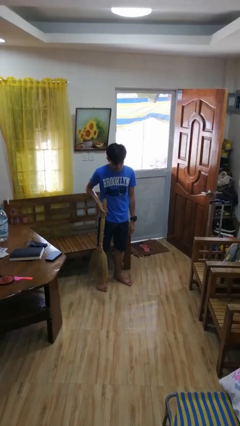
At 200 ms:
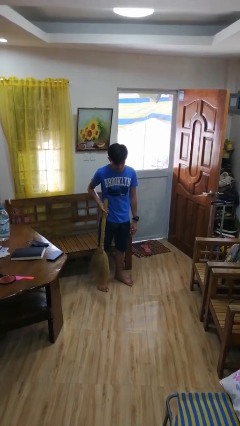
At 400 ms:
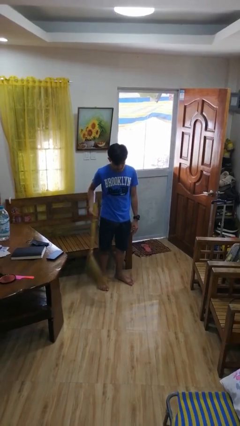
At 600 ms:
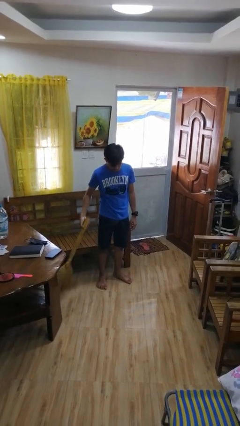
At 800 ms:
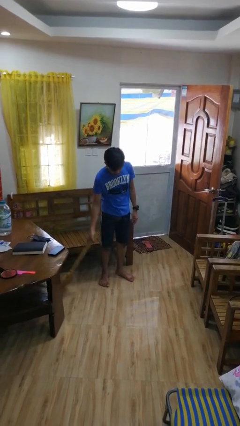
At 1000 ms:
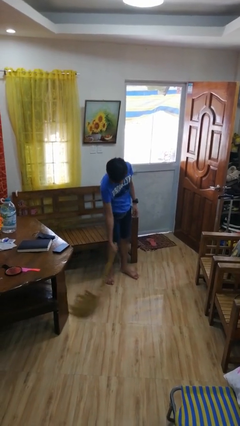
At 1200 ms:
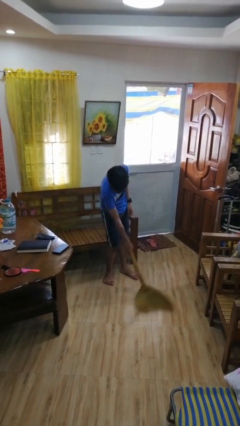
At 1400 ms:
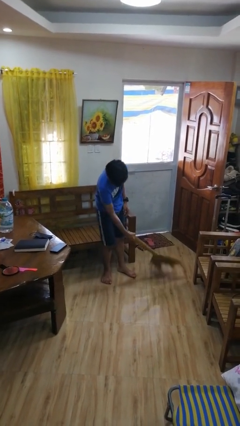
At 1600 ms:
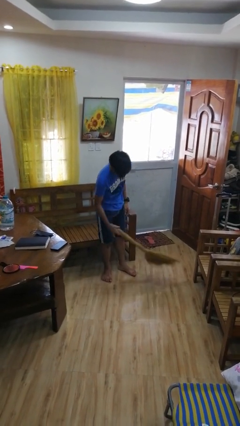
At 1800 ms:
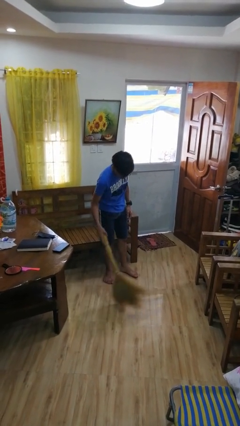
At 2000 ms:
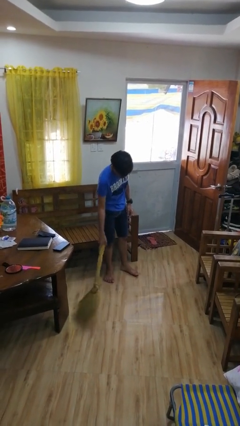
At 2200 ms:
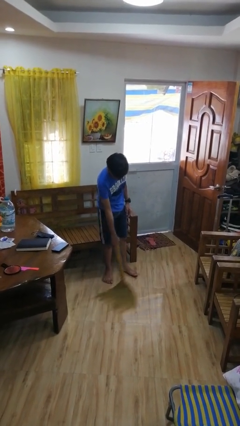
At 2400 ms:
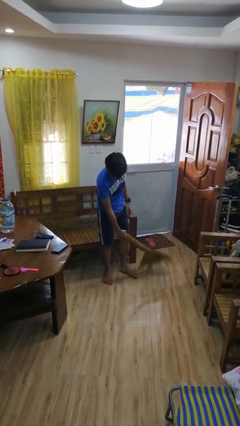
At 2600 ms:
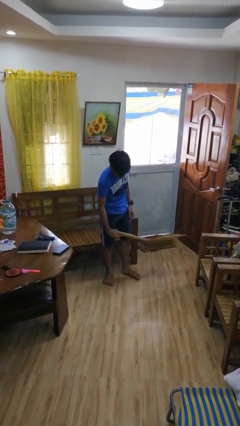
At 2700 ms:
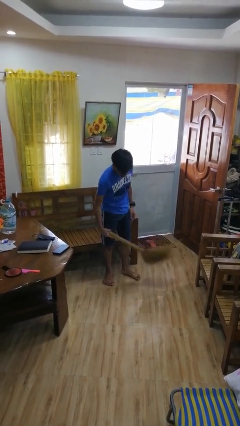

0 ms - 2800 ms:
person sweeps floor

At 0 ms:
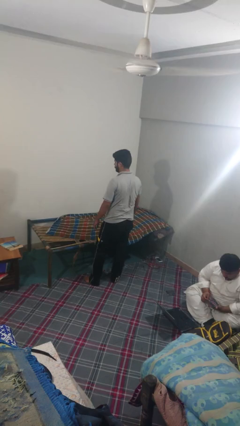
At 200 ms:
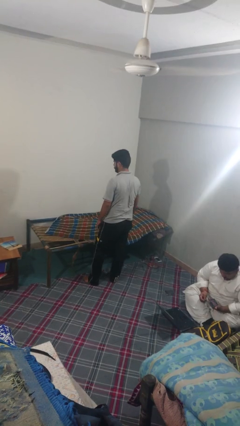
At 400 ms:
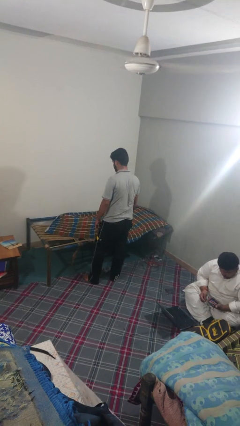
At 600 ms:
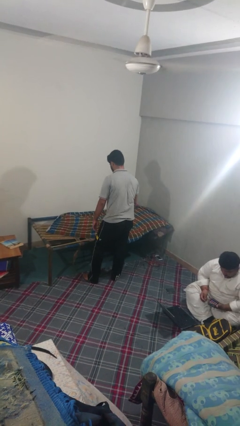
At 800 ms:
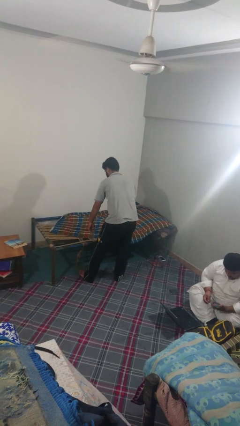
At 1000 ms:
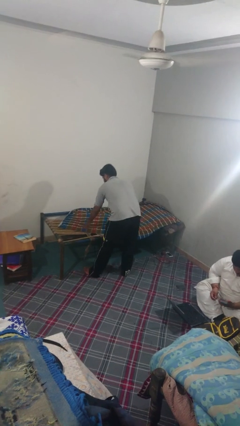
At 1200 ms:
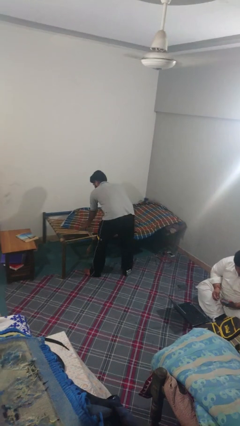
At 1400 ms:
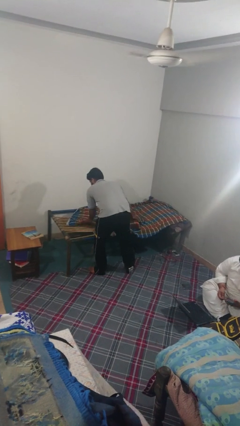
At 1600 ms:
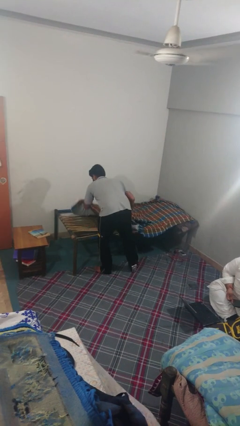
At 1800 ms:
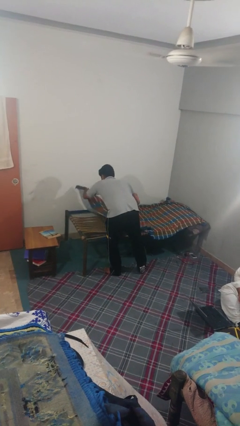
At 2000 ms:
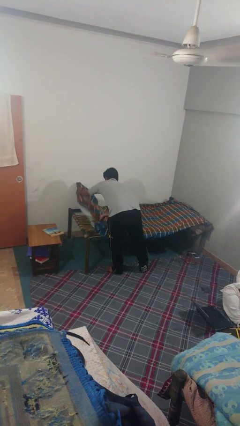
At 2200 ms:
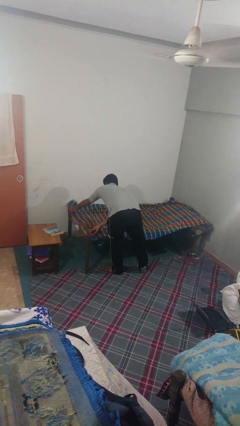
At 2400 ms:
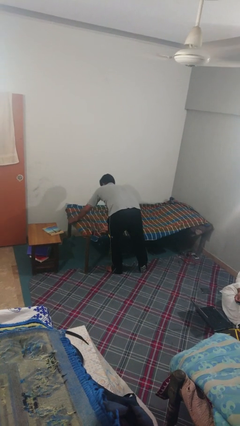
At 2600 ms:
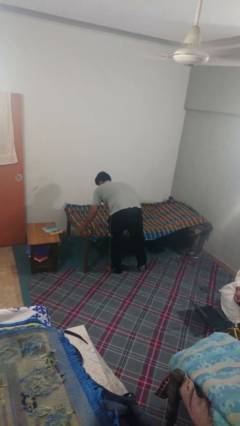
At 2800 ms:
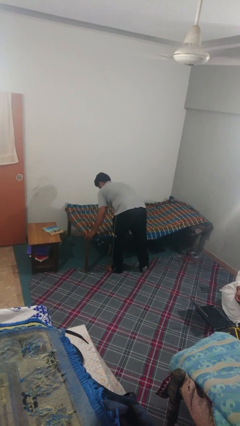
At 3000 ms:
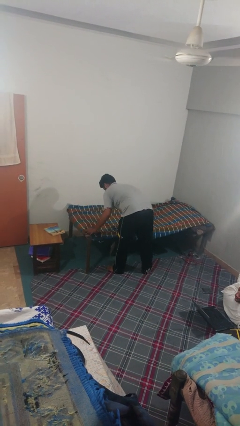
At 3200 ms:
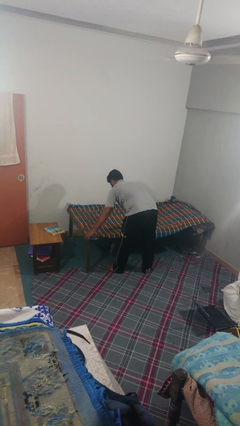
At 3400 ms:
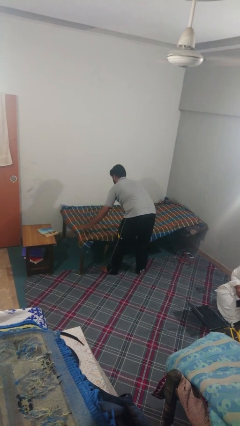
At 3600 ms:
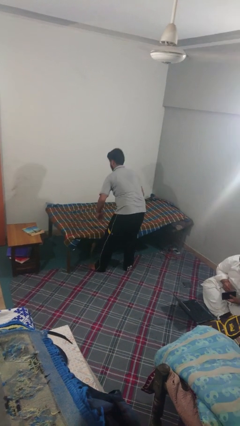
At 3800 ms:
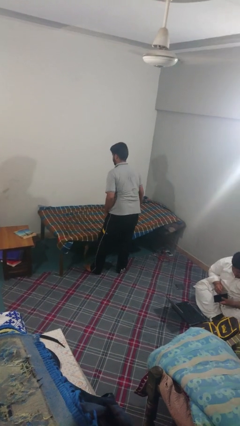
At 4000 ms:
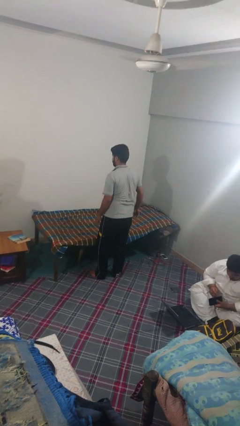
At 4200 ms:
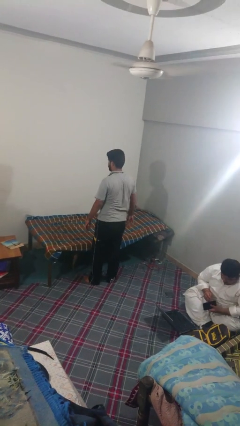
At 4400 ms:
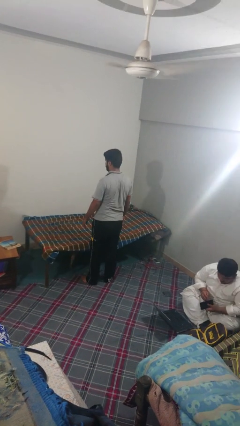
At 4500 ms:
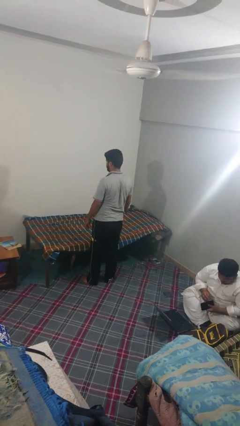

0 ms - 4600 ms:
person makes bed

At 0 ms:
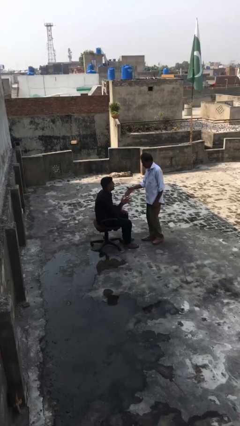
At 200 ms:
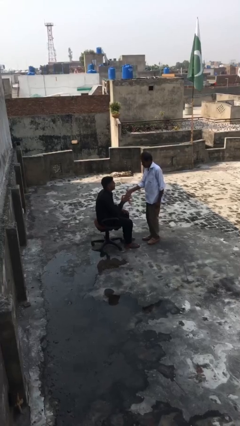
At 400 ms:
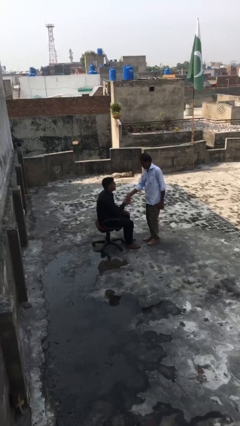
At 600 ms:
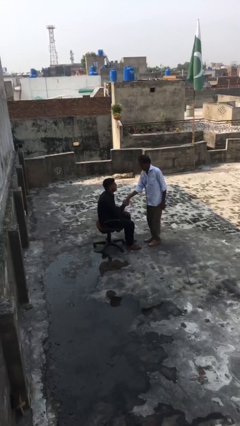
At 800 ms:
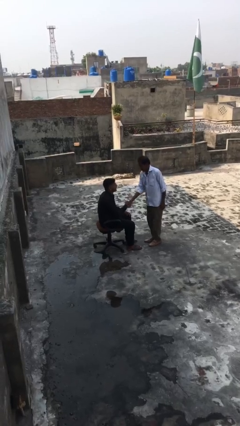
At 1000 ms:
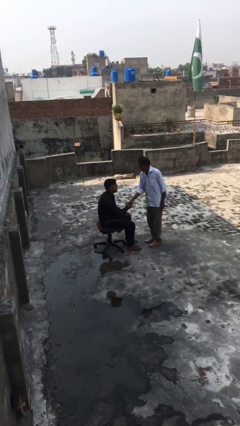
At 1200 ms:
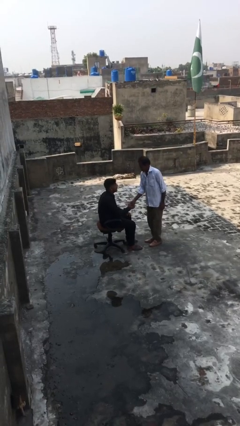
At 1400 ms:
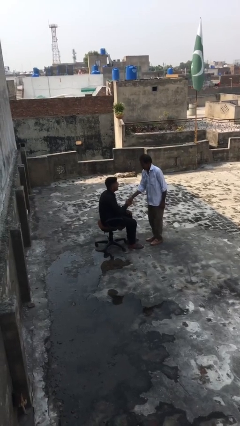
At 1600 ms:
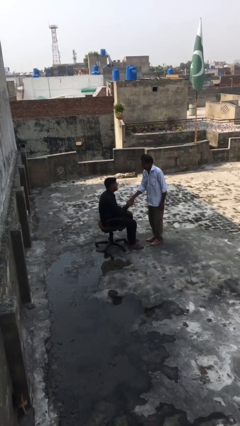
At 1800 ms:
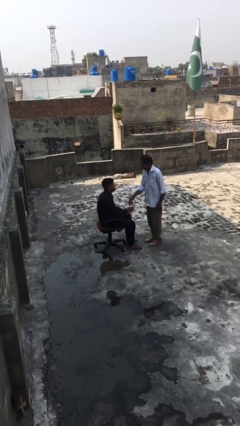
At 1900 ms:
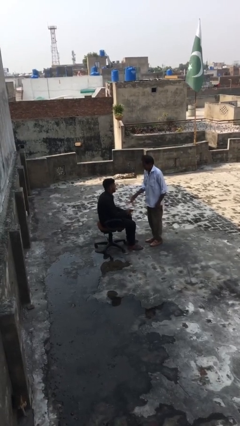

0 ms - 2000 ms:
person shakes hand

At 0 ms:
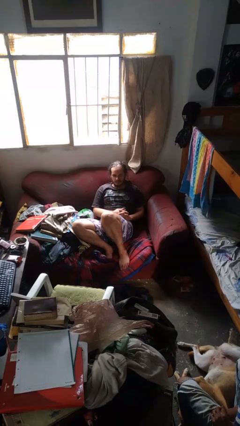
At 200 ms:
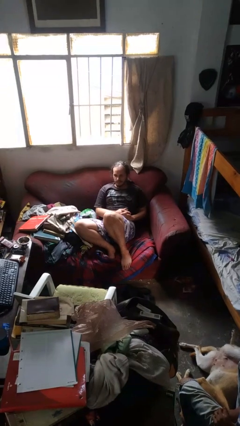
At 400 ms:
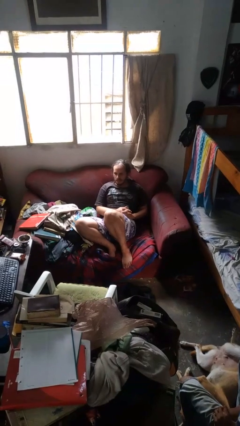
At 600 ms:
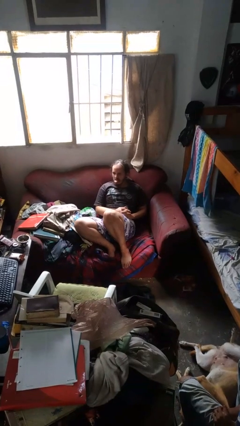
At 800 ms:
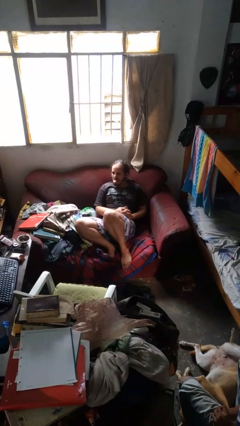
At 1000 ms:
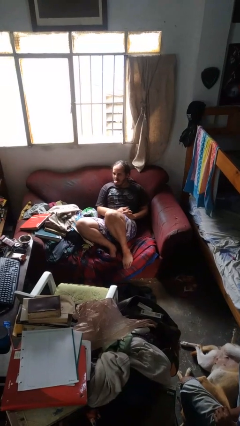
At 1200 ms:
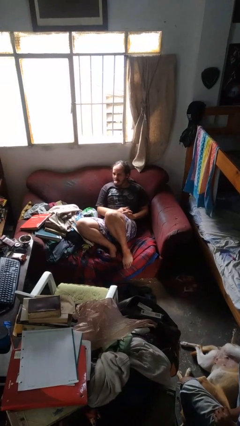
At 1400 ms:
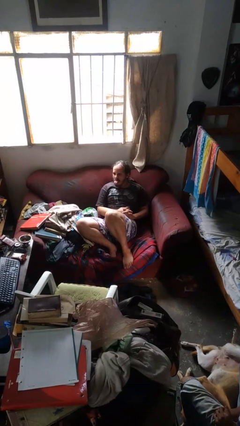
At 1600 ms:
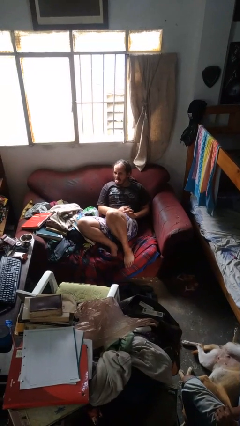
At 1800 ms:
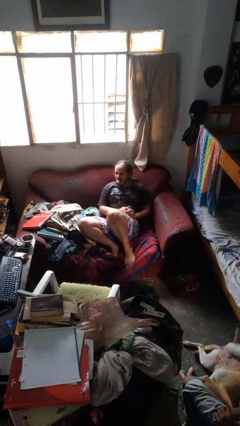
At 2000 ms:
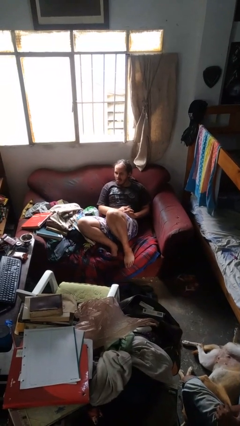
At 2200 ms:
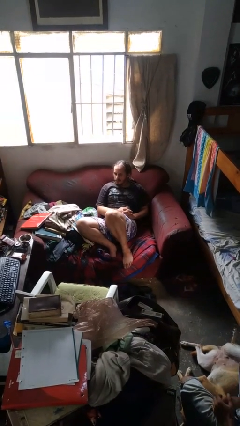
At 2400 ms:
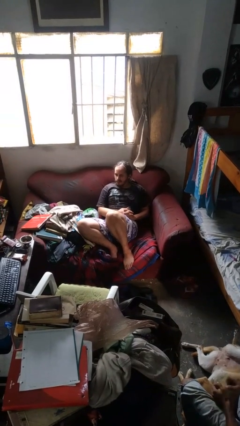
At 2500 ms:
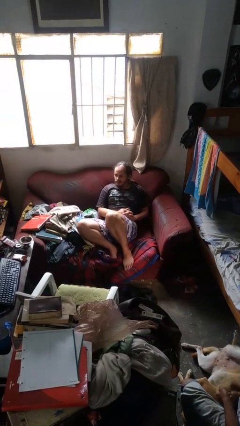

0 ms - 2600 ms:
person sticks out tongue

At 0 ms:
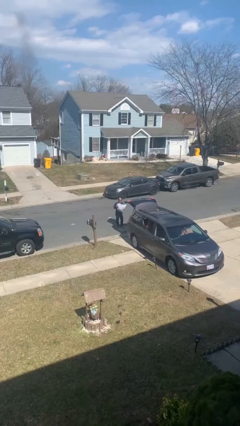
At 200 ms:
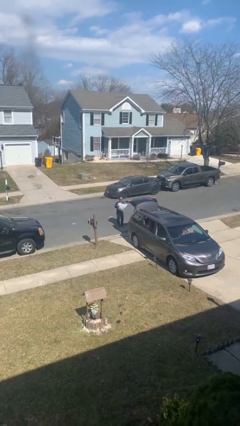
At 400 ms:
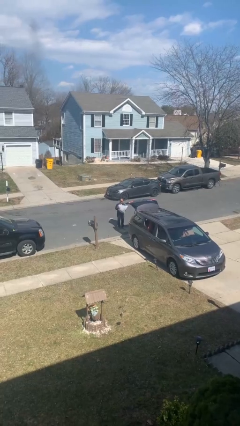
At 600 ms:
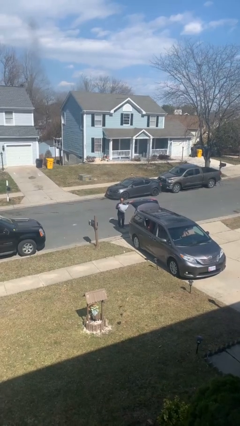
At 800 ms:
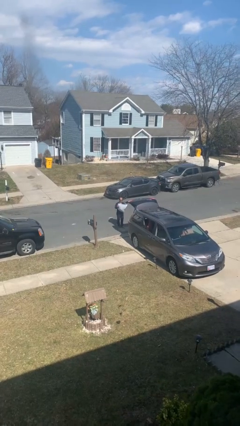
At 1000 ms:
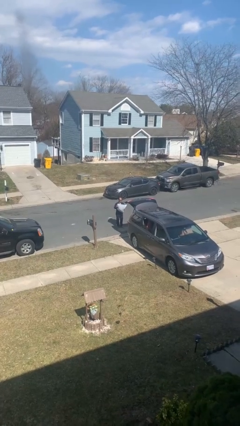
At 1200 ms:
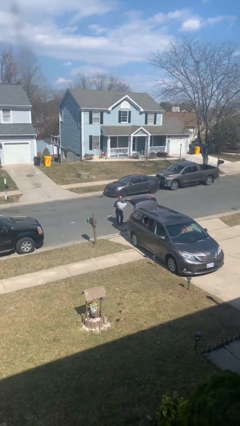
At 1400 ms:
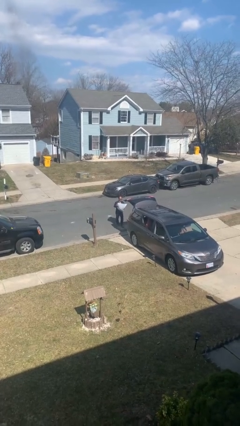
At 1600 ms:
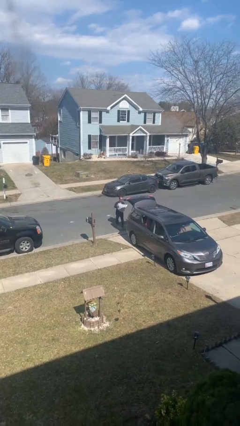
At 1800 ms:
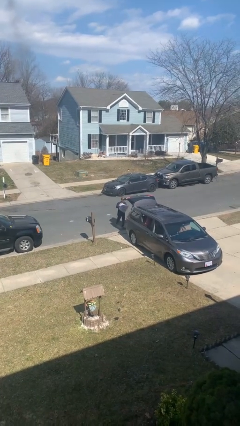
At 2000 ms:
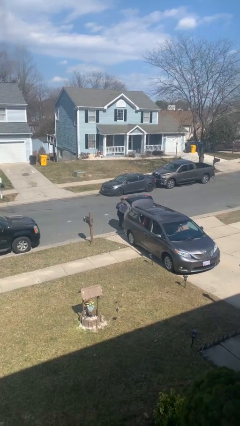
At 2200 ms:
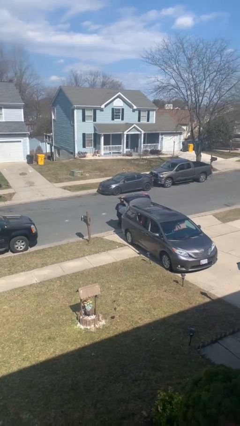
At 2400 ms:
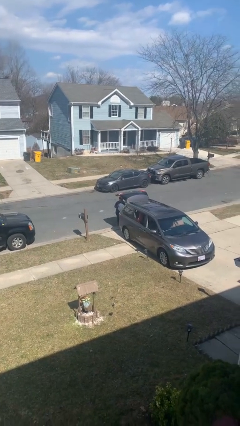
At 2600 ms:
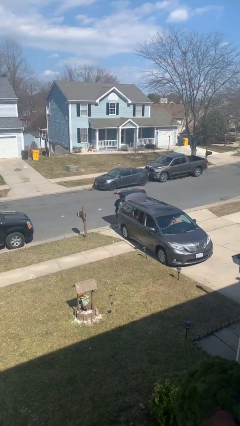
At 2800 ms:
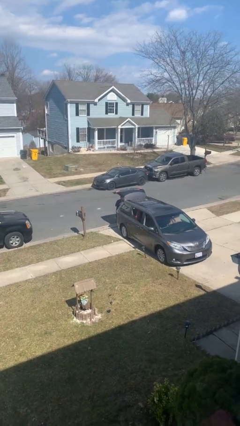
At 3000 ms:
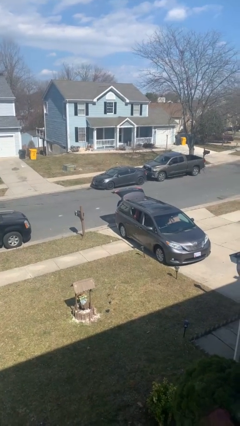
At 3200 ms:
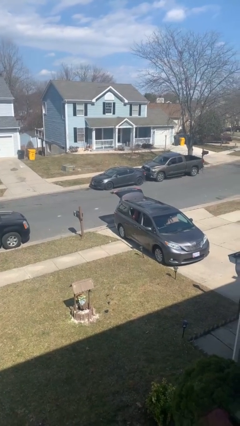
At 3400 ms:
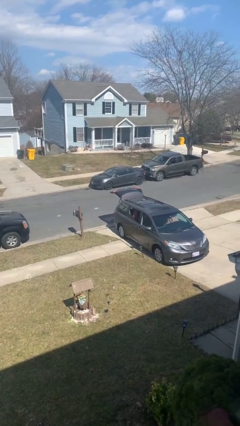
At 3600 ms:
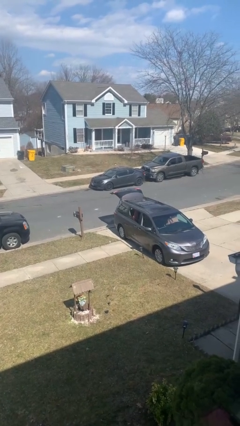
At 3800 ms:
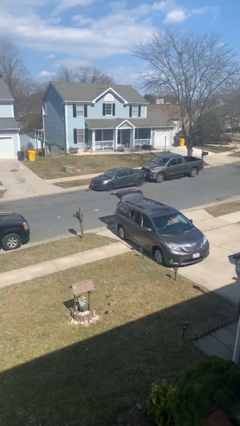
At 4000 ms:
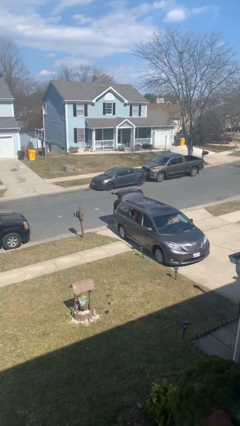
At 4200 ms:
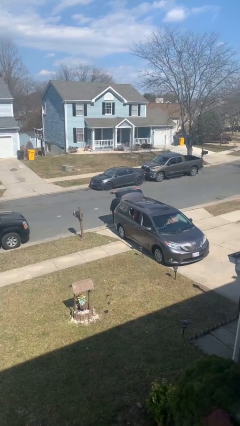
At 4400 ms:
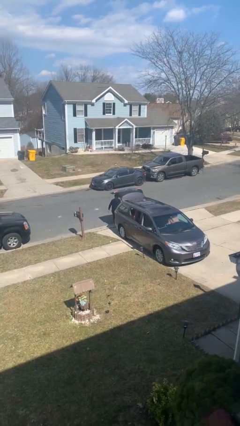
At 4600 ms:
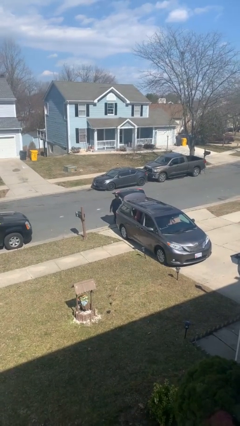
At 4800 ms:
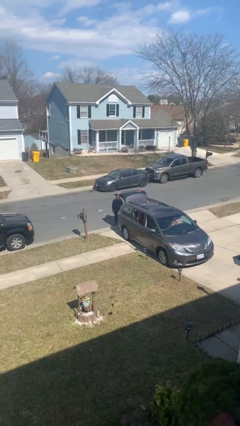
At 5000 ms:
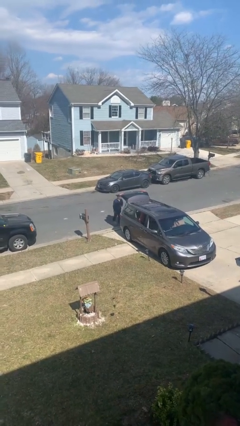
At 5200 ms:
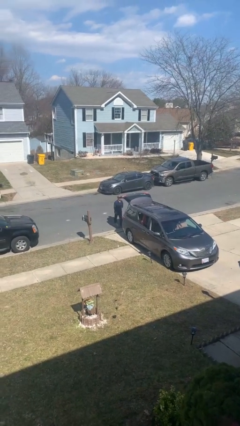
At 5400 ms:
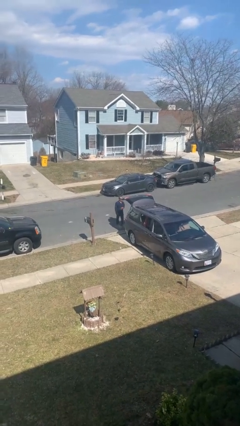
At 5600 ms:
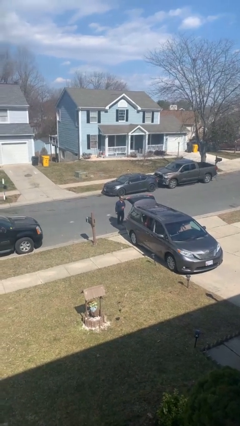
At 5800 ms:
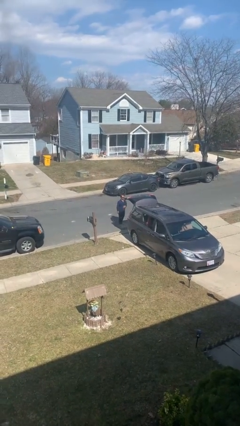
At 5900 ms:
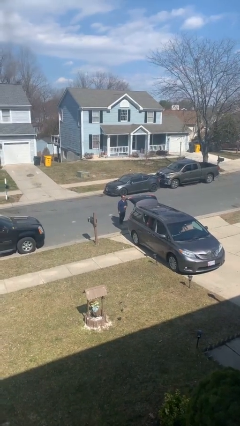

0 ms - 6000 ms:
person loads car
